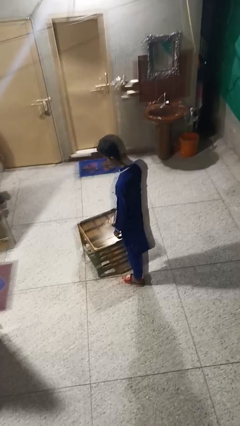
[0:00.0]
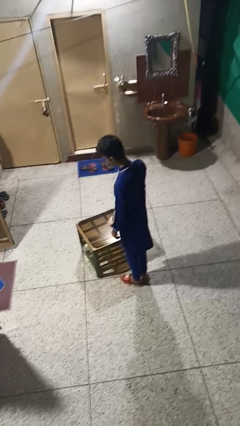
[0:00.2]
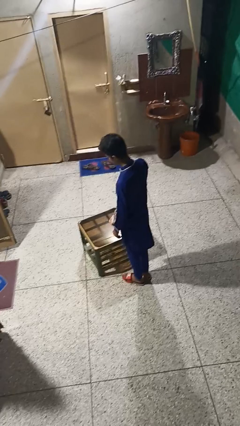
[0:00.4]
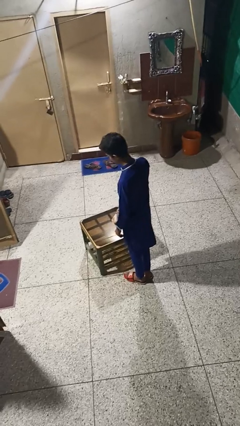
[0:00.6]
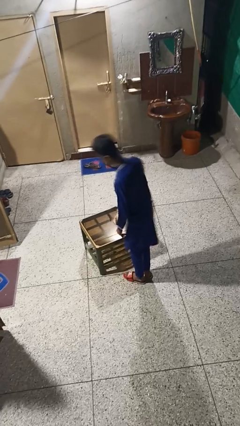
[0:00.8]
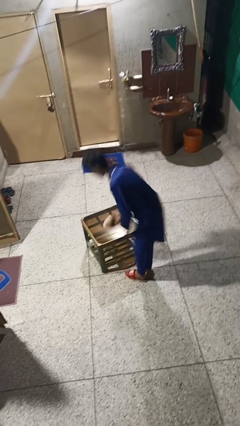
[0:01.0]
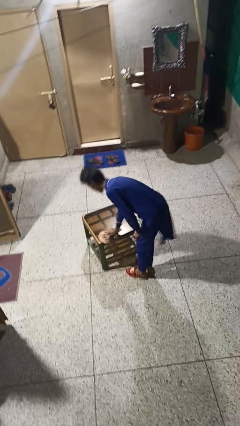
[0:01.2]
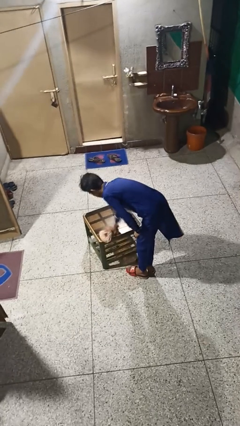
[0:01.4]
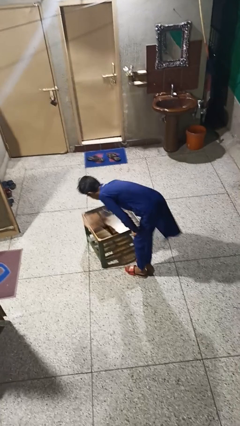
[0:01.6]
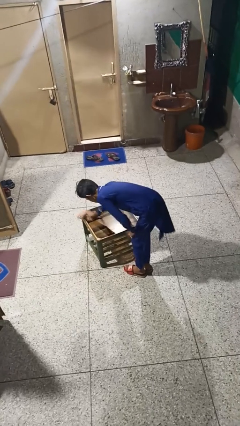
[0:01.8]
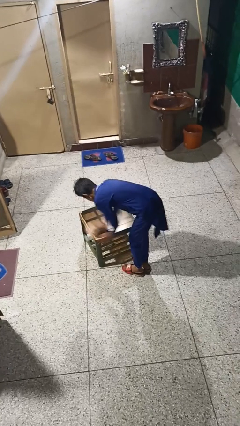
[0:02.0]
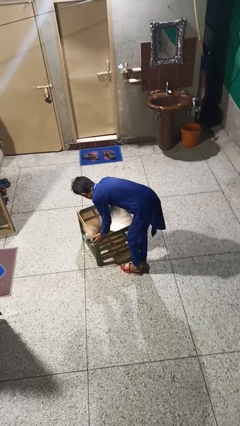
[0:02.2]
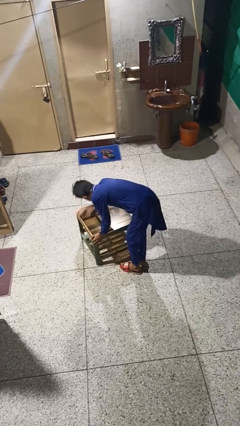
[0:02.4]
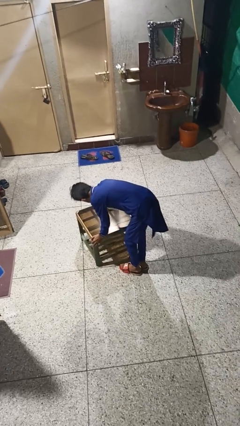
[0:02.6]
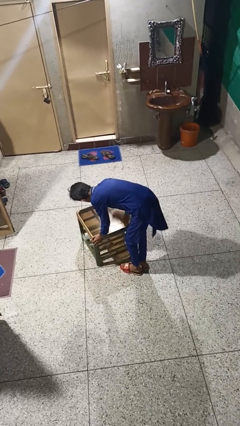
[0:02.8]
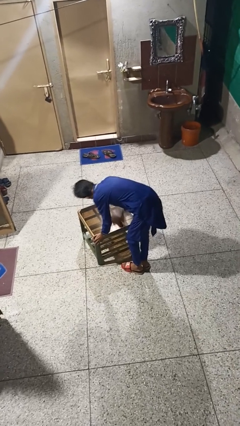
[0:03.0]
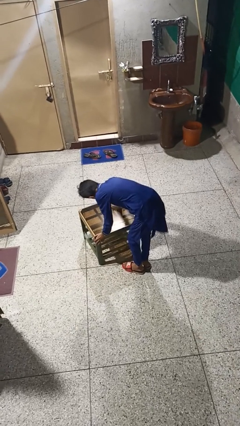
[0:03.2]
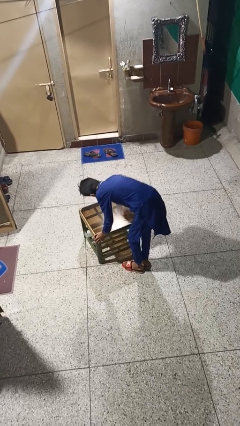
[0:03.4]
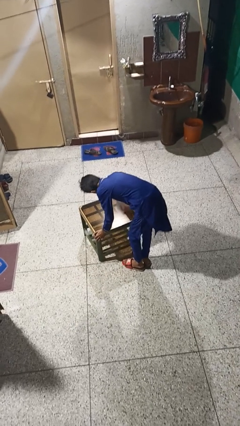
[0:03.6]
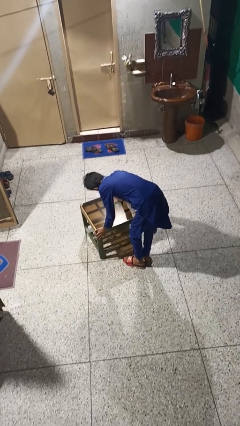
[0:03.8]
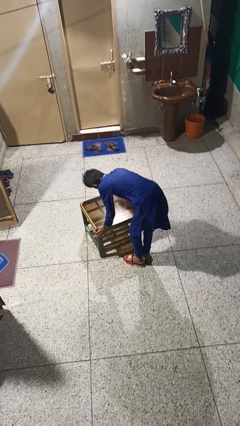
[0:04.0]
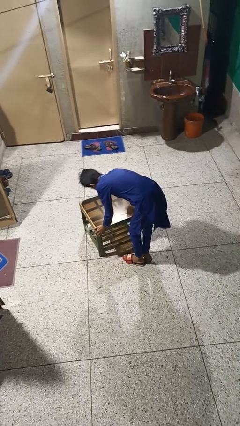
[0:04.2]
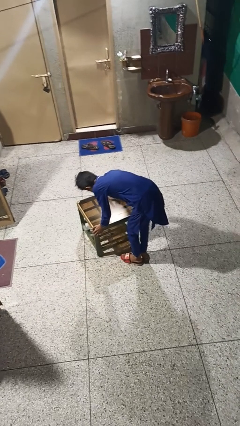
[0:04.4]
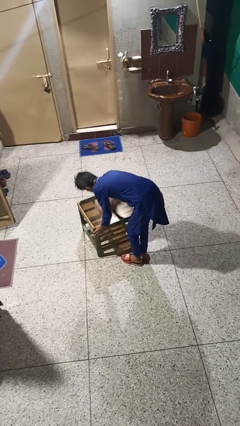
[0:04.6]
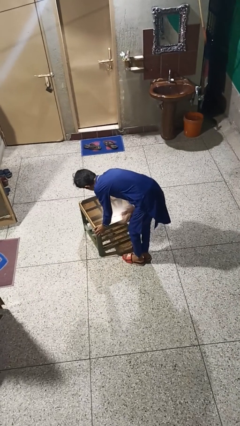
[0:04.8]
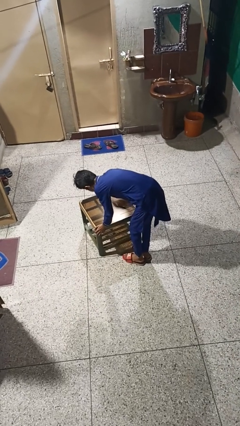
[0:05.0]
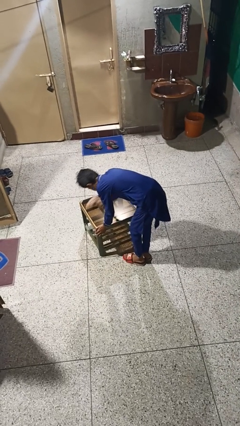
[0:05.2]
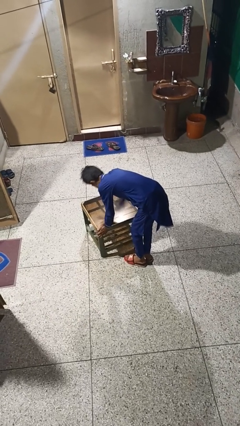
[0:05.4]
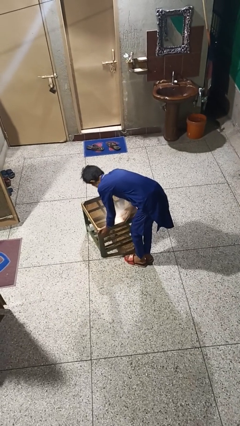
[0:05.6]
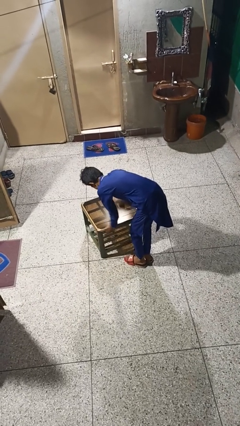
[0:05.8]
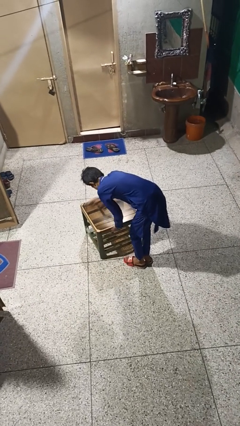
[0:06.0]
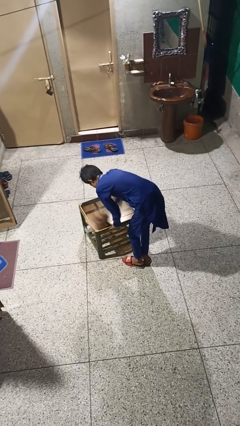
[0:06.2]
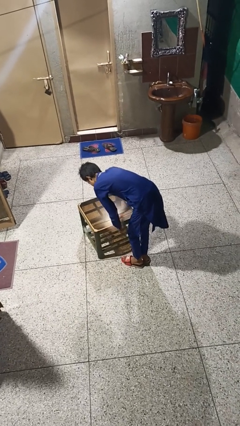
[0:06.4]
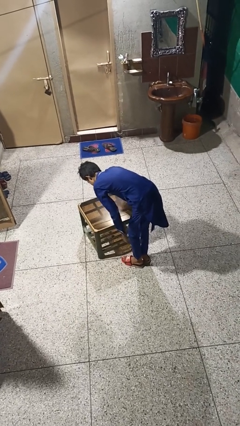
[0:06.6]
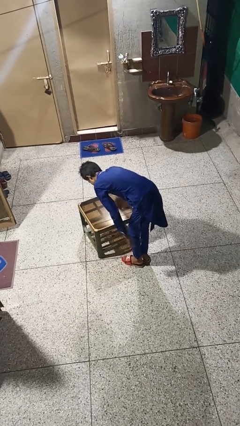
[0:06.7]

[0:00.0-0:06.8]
person cleans table with rag

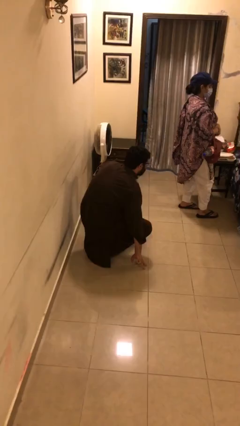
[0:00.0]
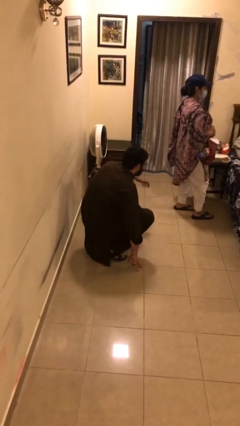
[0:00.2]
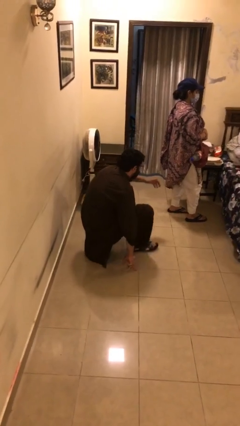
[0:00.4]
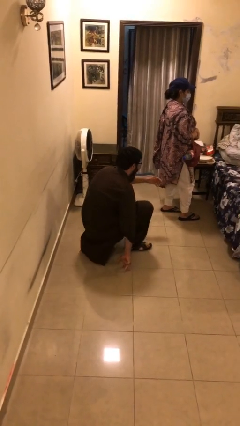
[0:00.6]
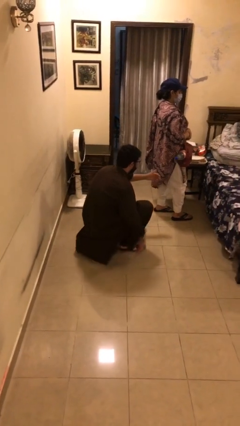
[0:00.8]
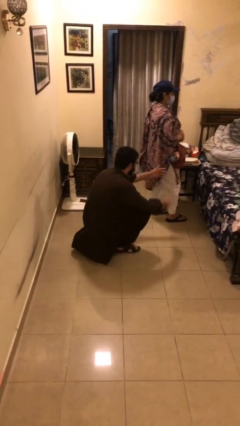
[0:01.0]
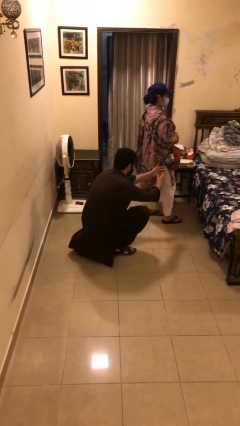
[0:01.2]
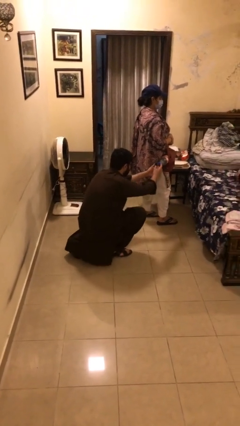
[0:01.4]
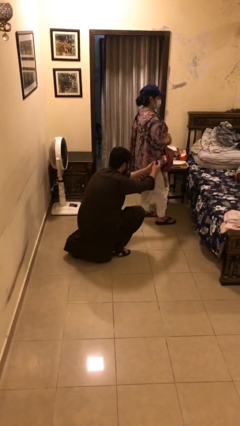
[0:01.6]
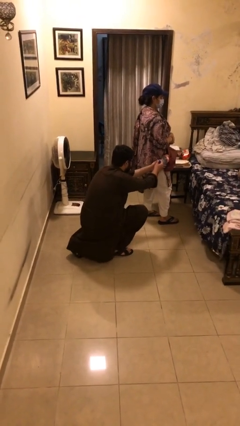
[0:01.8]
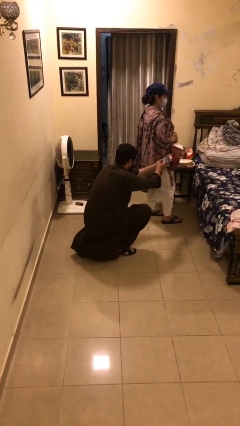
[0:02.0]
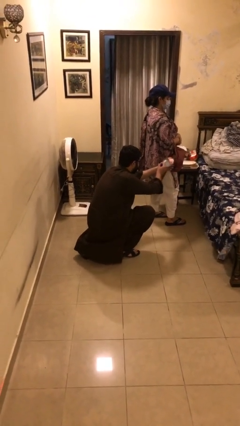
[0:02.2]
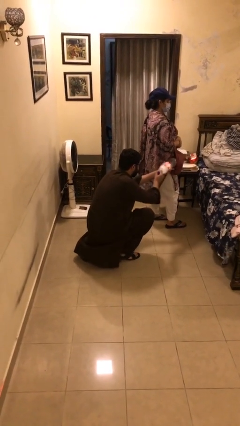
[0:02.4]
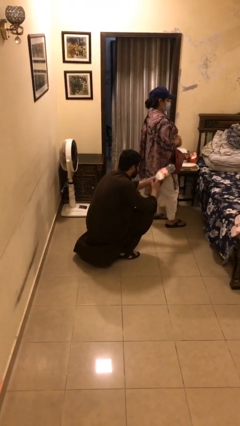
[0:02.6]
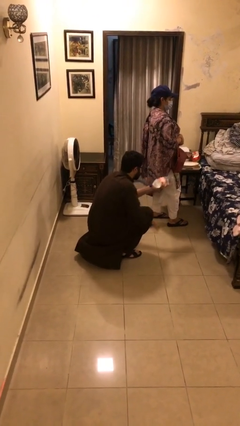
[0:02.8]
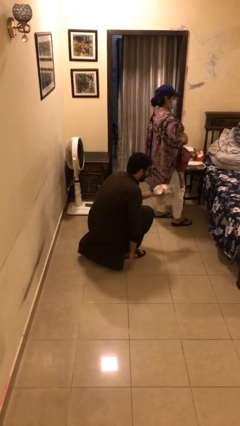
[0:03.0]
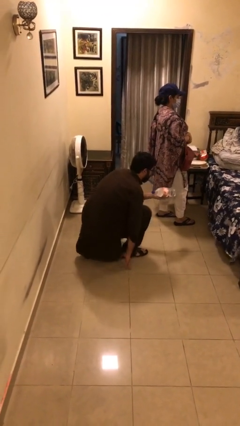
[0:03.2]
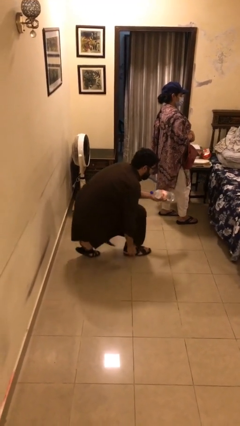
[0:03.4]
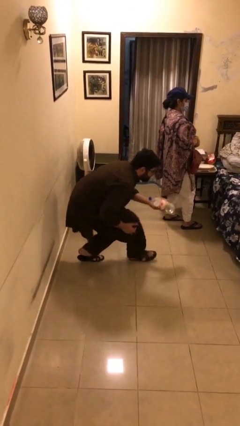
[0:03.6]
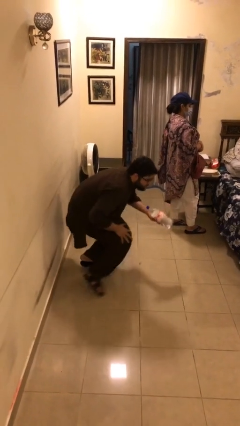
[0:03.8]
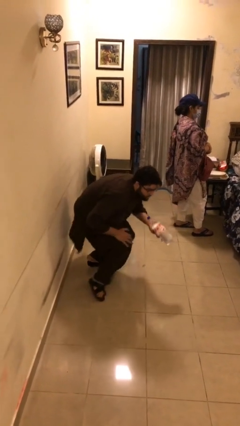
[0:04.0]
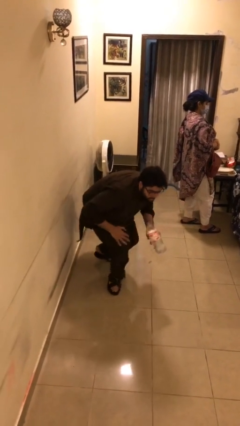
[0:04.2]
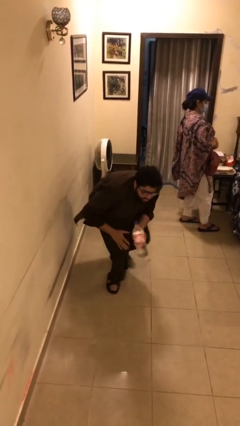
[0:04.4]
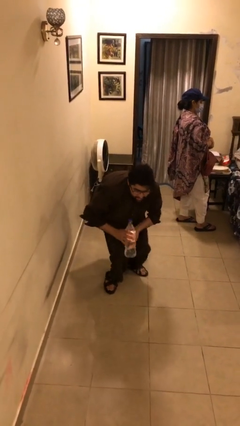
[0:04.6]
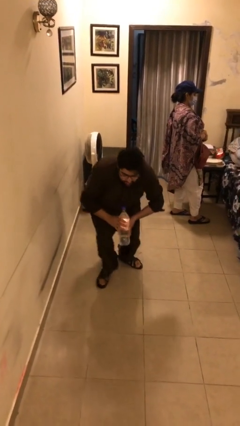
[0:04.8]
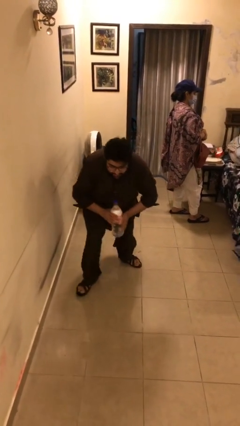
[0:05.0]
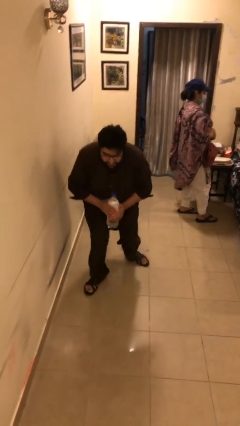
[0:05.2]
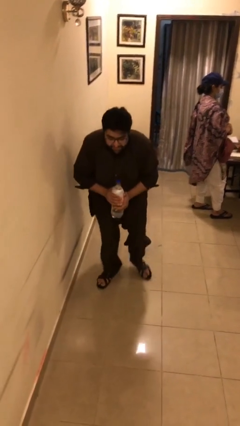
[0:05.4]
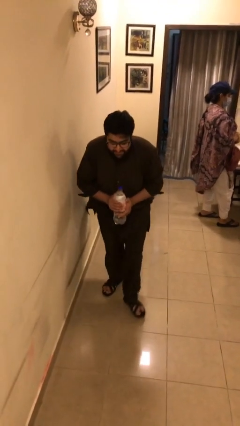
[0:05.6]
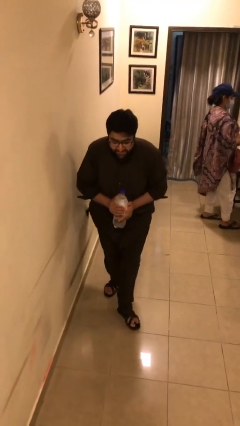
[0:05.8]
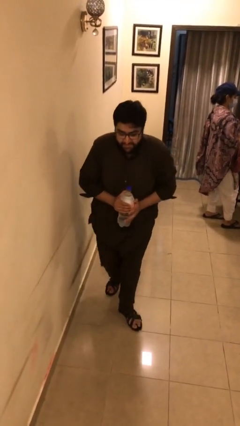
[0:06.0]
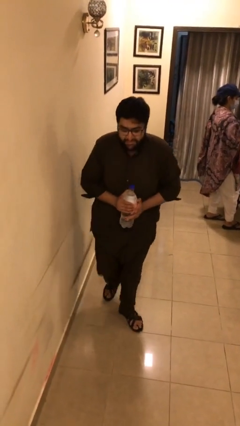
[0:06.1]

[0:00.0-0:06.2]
person steals object from person

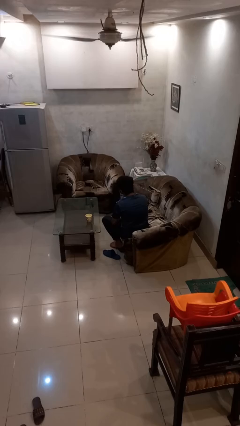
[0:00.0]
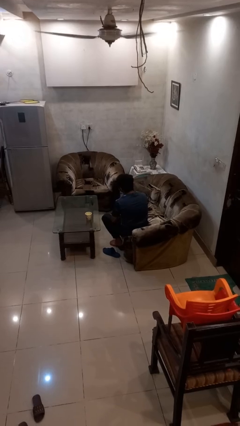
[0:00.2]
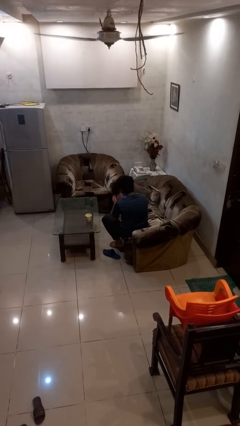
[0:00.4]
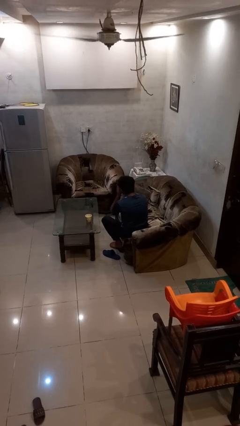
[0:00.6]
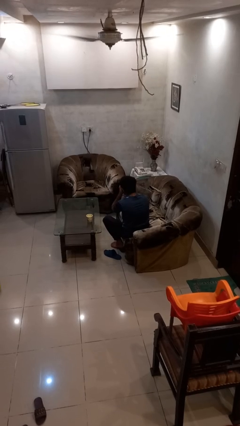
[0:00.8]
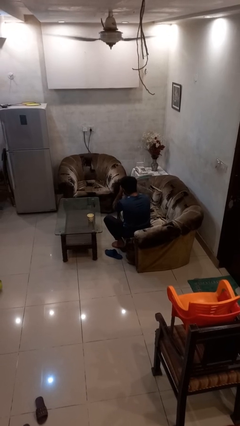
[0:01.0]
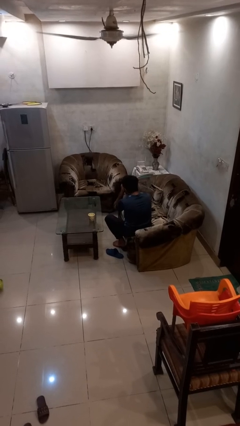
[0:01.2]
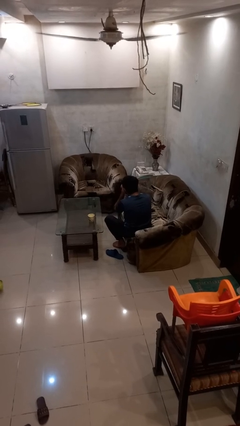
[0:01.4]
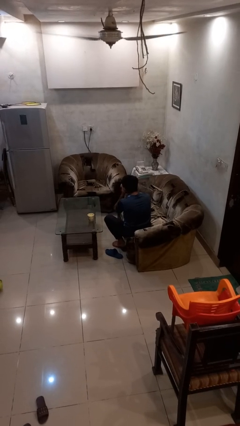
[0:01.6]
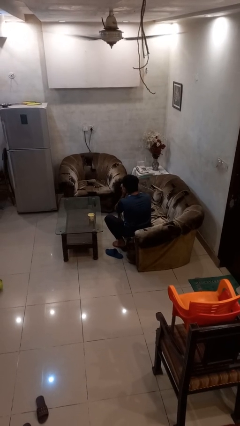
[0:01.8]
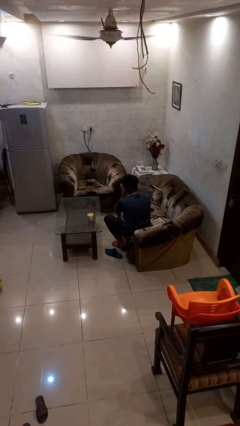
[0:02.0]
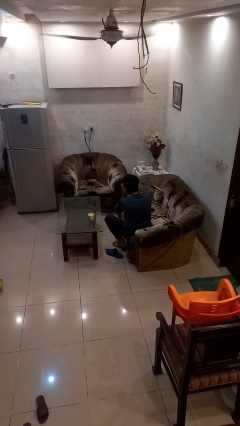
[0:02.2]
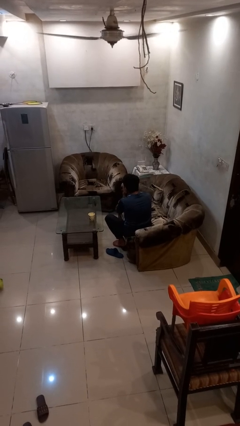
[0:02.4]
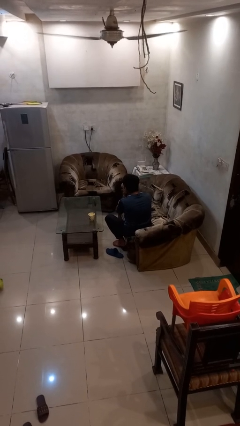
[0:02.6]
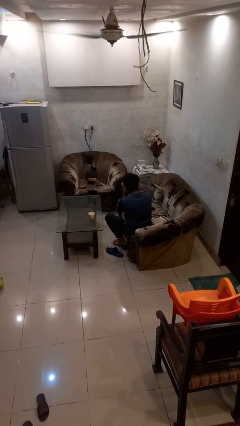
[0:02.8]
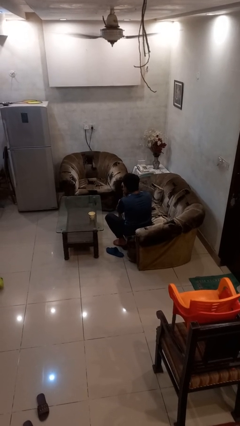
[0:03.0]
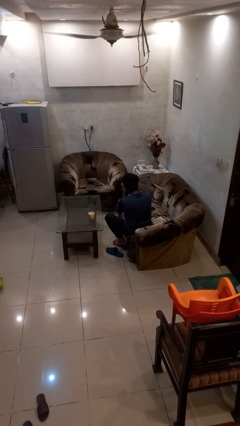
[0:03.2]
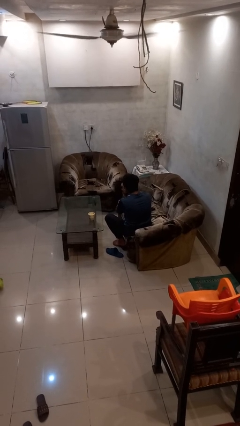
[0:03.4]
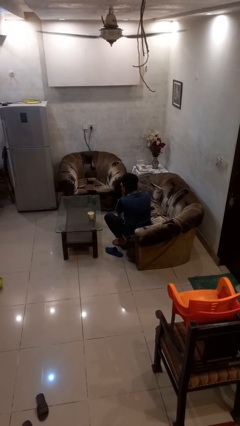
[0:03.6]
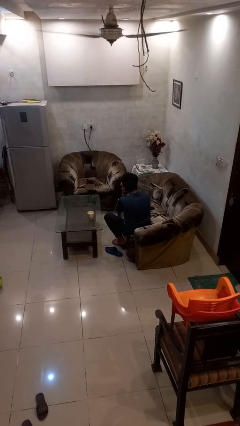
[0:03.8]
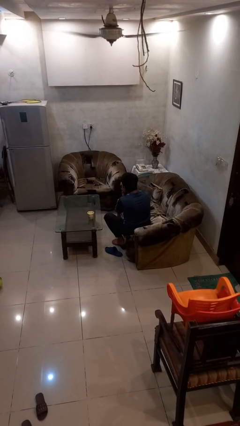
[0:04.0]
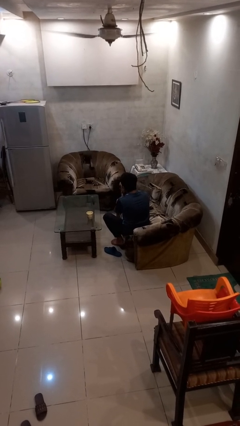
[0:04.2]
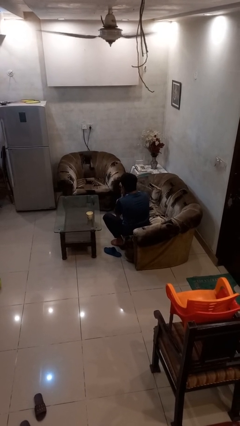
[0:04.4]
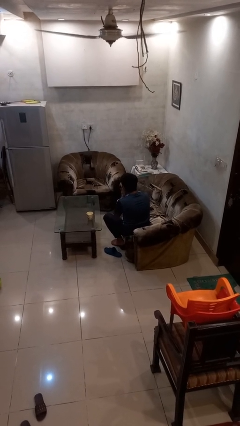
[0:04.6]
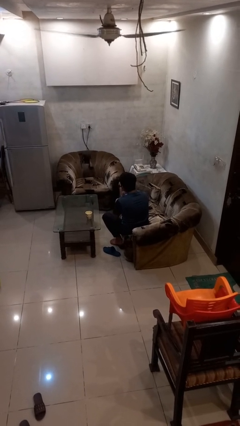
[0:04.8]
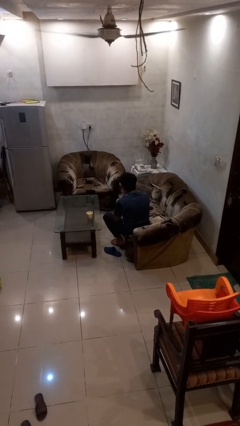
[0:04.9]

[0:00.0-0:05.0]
person covers face with hands
